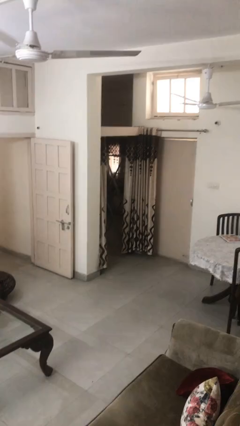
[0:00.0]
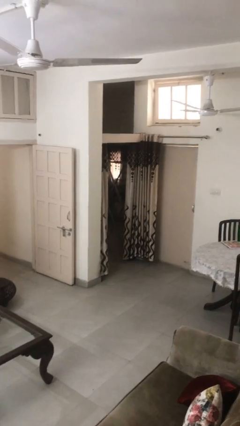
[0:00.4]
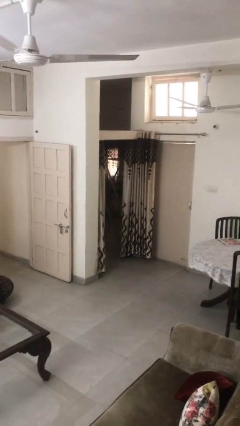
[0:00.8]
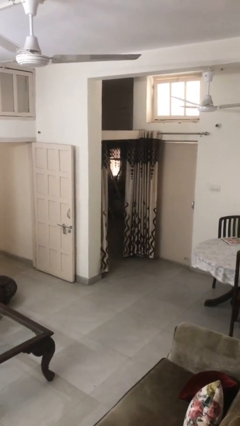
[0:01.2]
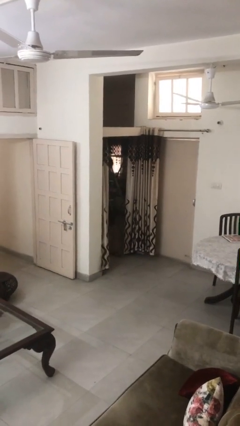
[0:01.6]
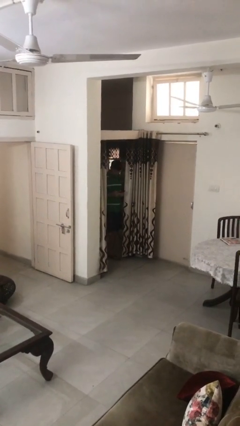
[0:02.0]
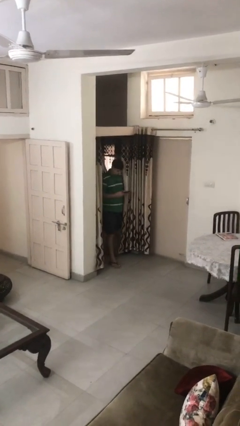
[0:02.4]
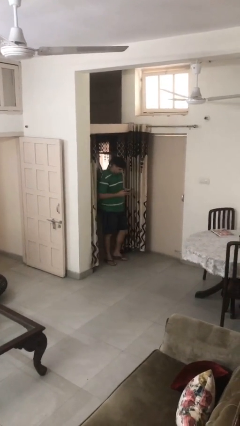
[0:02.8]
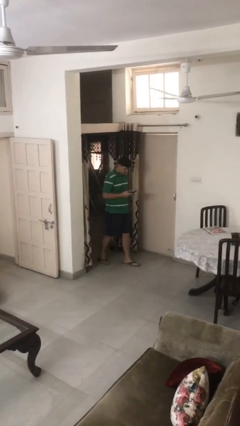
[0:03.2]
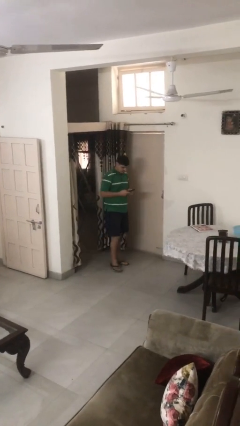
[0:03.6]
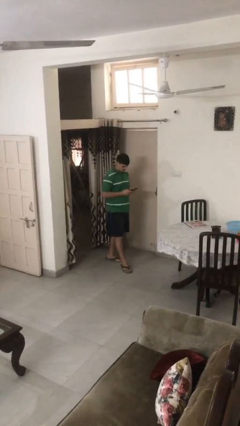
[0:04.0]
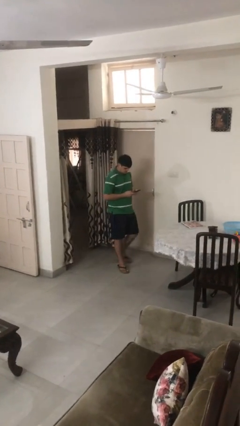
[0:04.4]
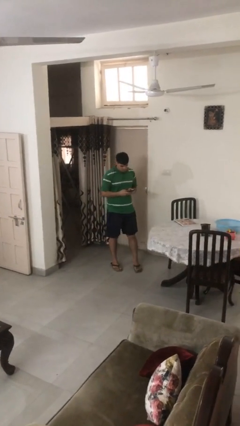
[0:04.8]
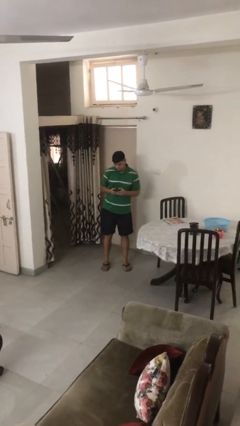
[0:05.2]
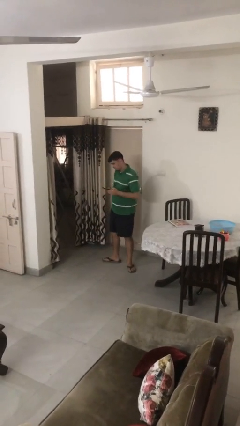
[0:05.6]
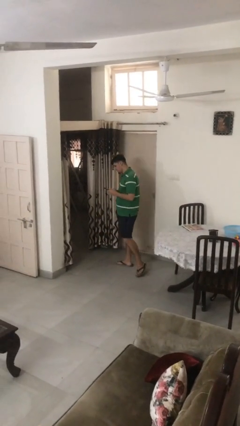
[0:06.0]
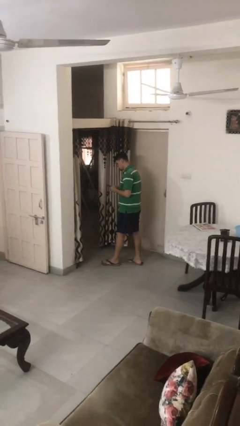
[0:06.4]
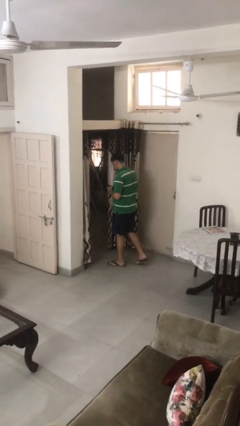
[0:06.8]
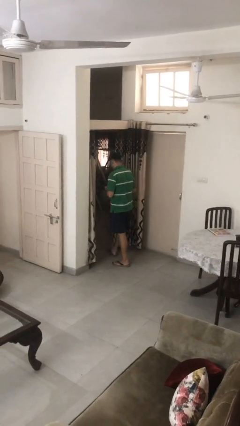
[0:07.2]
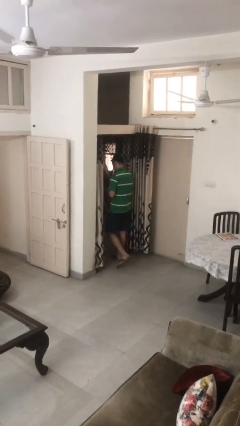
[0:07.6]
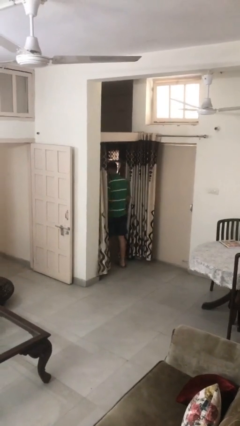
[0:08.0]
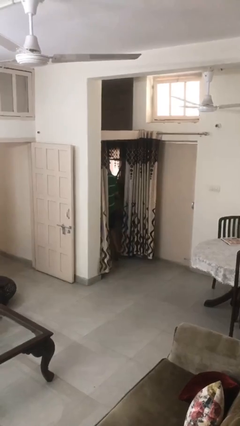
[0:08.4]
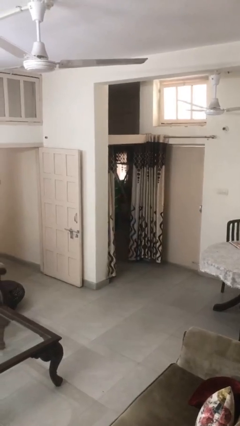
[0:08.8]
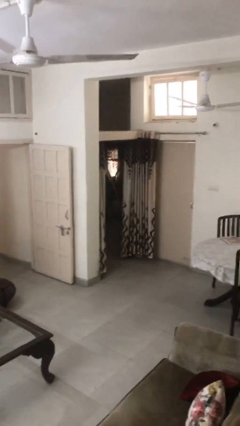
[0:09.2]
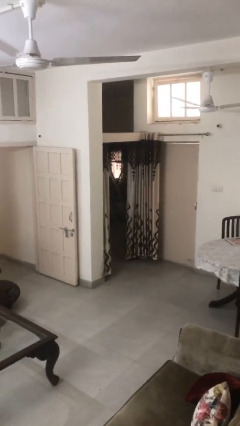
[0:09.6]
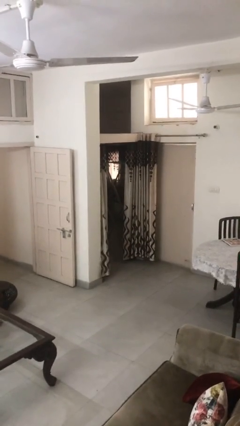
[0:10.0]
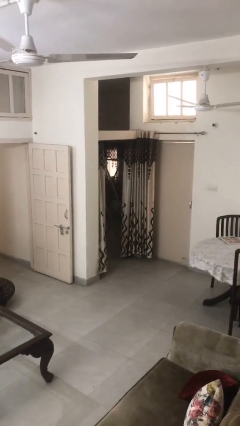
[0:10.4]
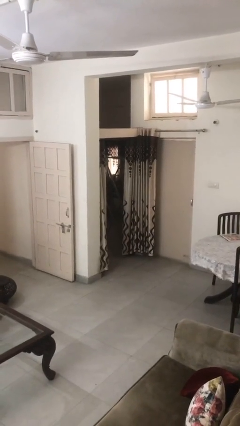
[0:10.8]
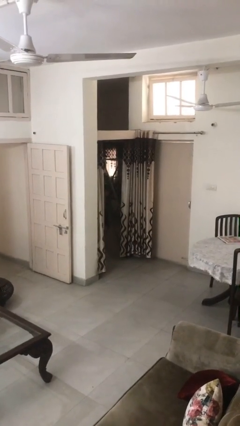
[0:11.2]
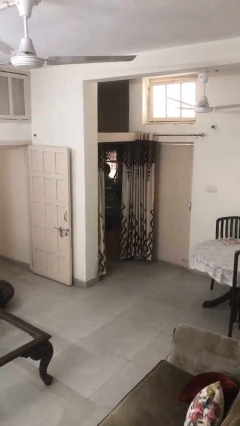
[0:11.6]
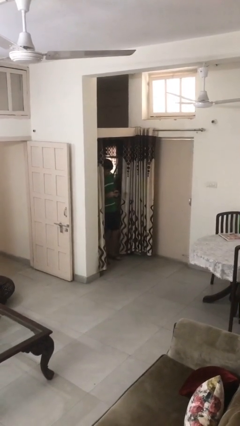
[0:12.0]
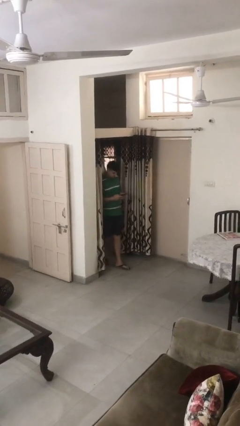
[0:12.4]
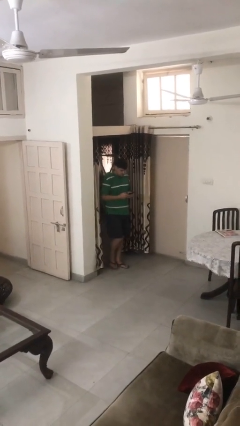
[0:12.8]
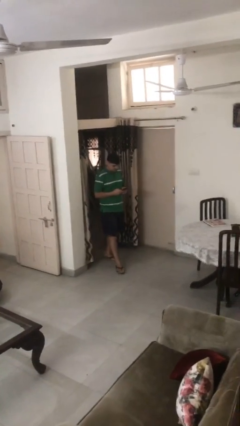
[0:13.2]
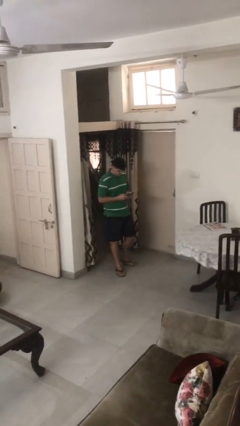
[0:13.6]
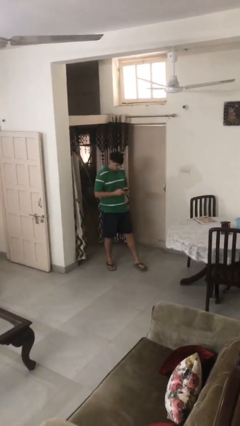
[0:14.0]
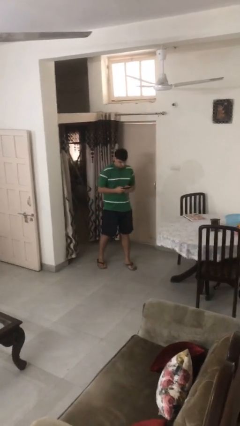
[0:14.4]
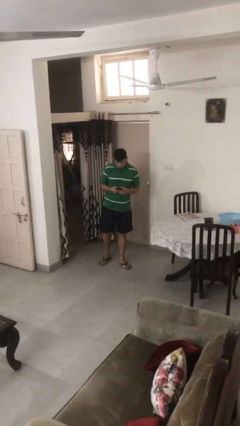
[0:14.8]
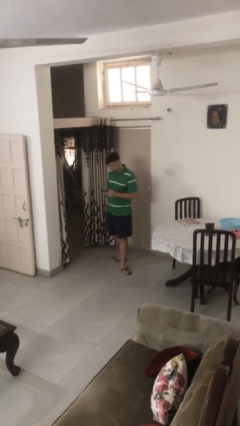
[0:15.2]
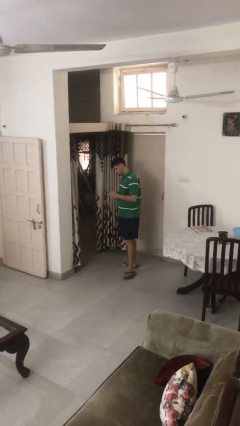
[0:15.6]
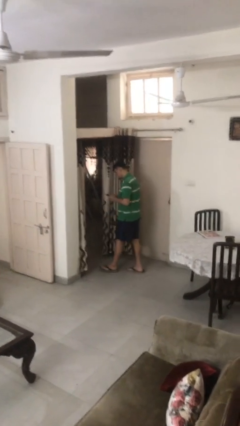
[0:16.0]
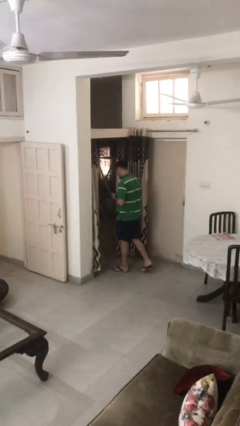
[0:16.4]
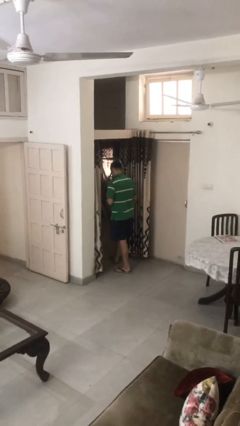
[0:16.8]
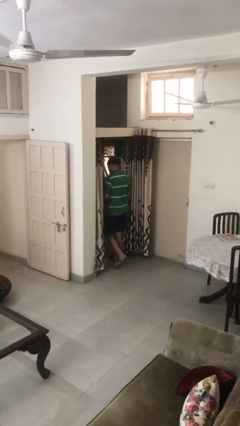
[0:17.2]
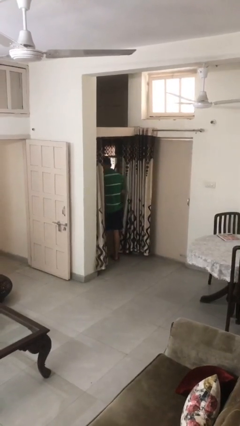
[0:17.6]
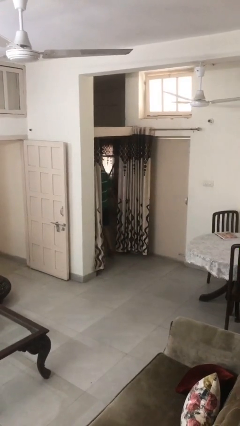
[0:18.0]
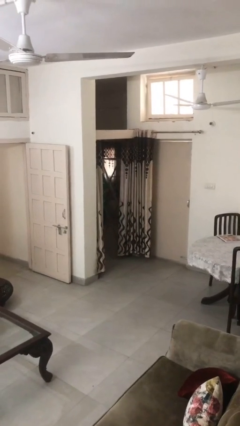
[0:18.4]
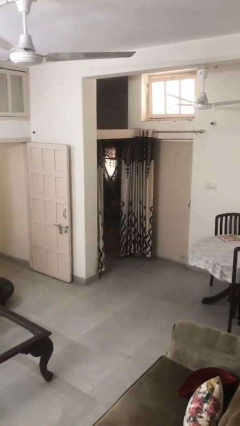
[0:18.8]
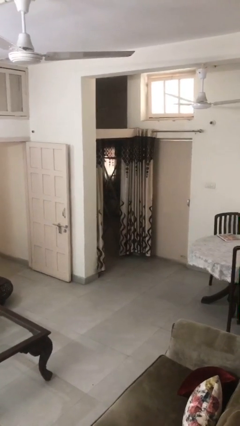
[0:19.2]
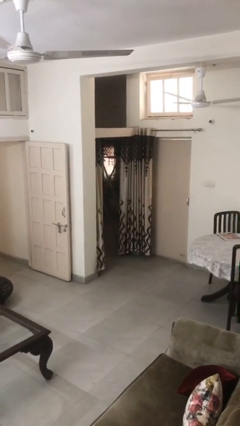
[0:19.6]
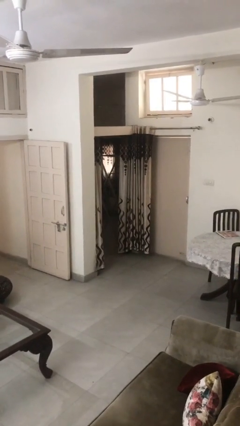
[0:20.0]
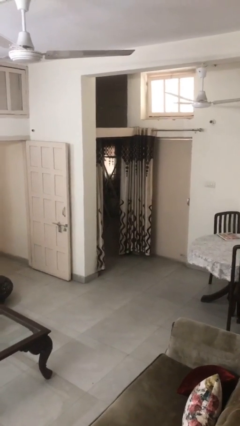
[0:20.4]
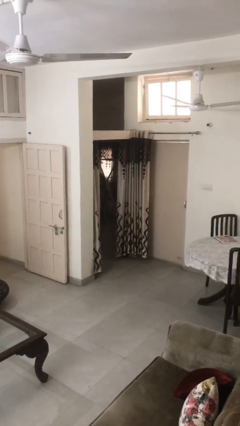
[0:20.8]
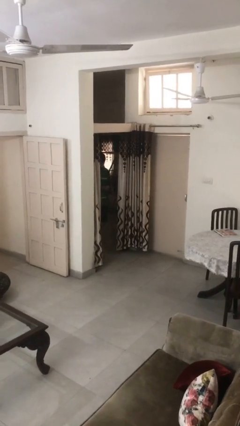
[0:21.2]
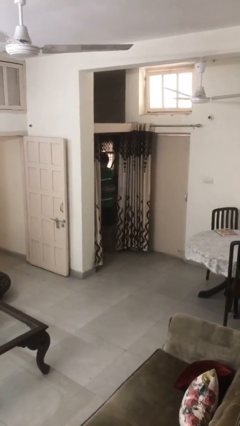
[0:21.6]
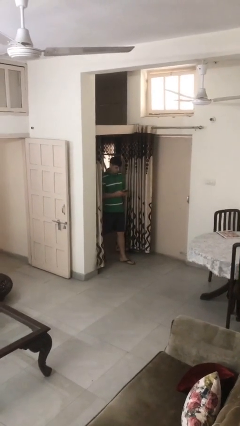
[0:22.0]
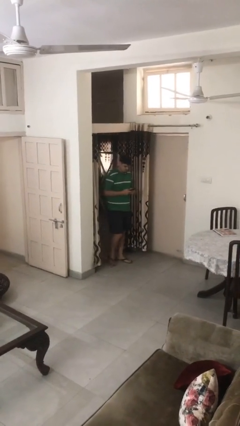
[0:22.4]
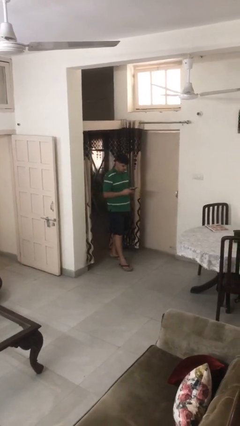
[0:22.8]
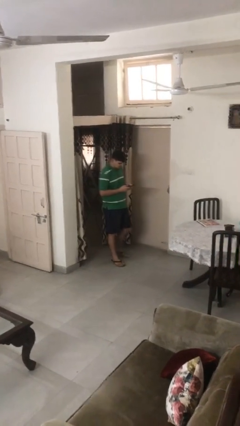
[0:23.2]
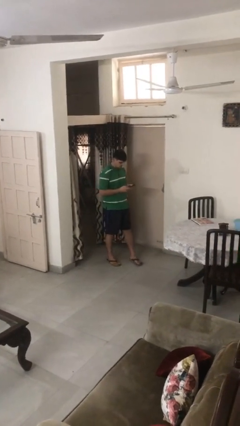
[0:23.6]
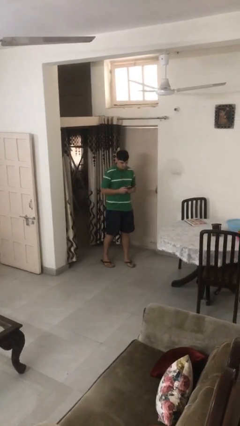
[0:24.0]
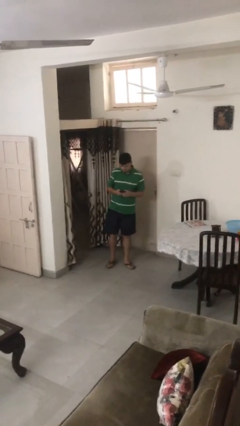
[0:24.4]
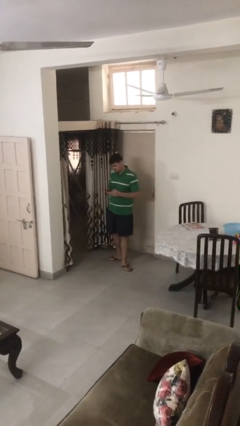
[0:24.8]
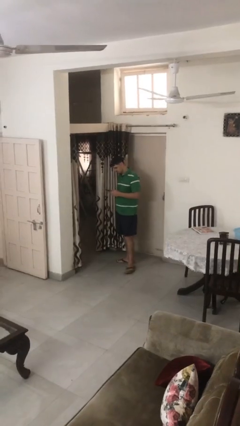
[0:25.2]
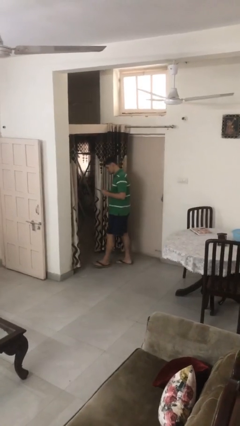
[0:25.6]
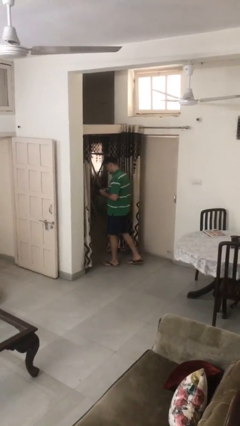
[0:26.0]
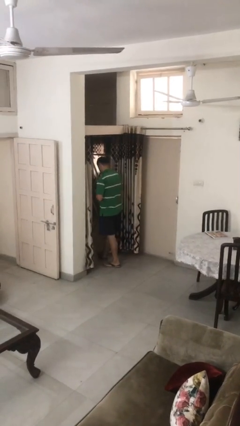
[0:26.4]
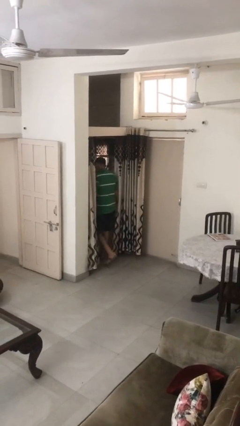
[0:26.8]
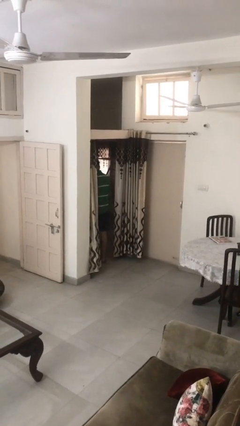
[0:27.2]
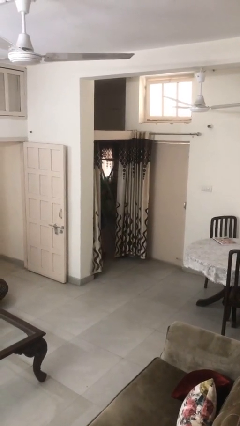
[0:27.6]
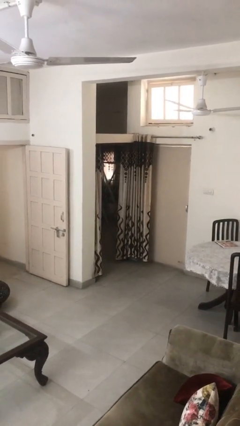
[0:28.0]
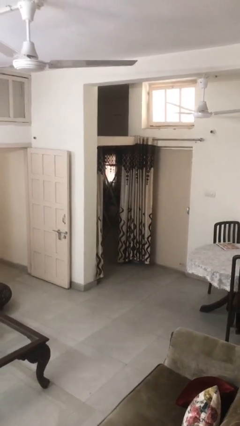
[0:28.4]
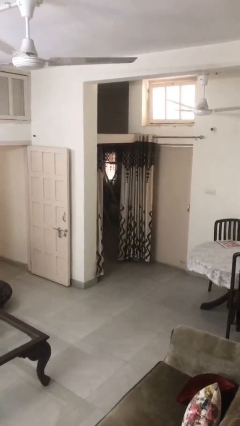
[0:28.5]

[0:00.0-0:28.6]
person texts on phone

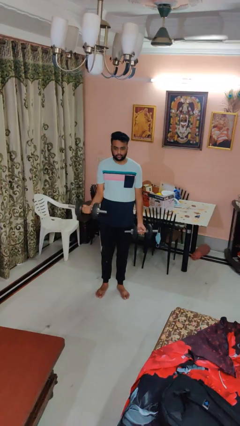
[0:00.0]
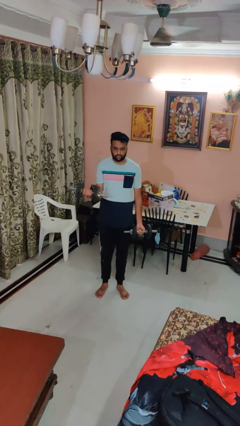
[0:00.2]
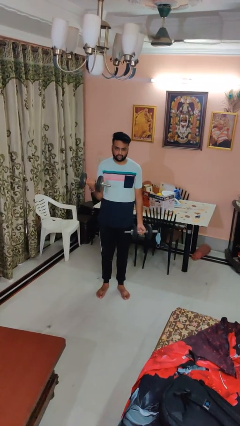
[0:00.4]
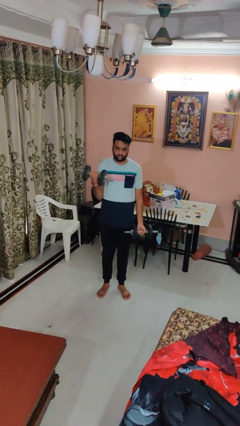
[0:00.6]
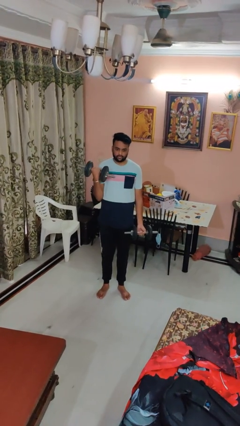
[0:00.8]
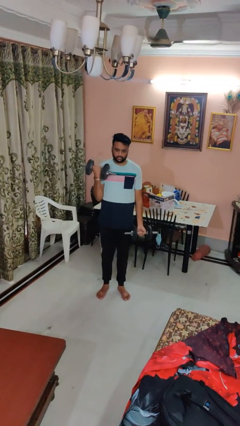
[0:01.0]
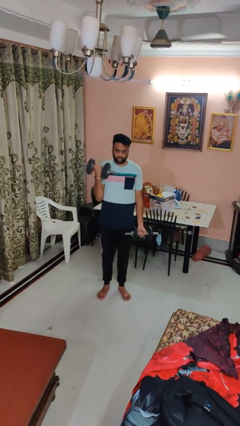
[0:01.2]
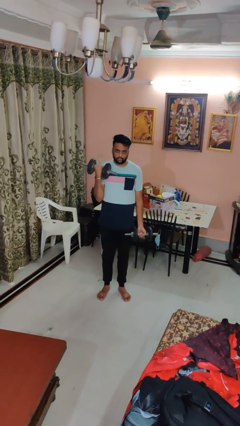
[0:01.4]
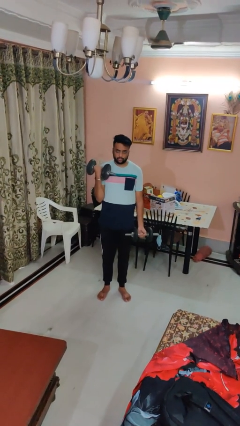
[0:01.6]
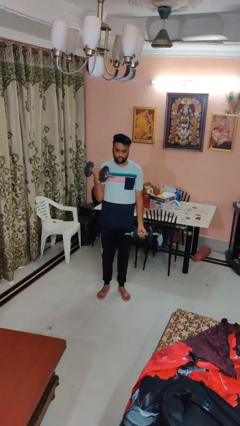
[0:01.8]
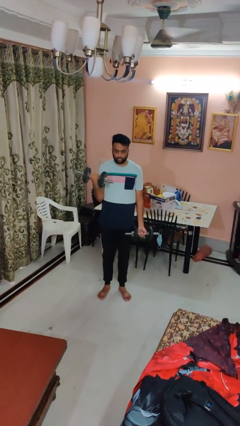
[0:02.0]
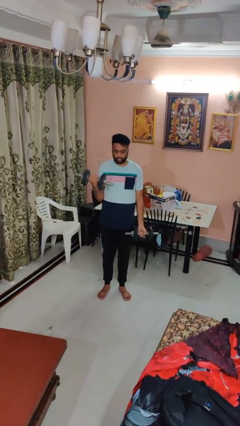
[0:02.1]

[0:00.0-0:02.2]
person lifts dumbbells

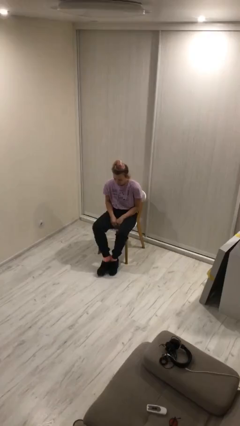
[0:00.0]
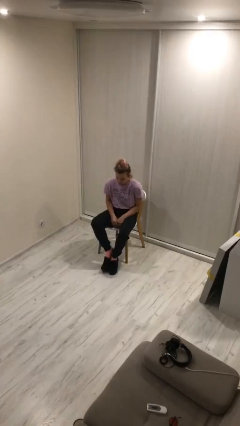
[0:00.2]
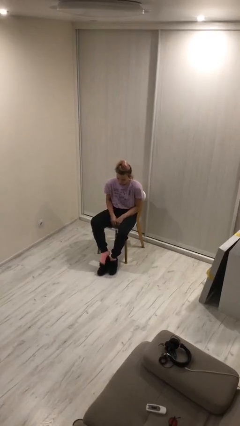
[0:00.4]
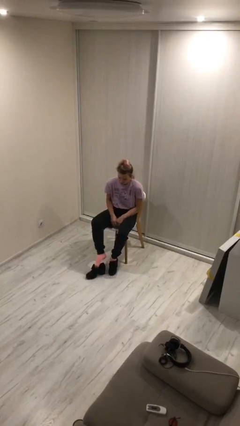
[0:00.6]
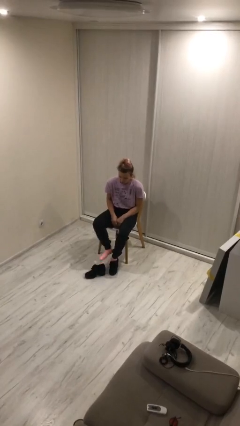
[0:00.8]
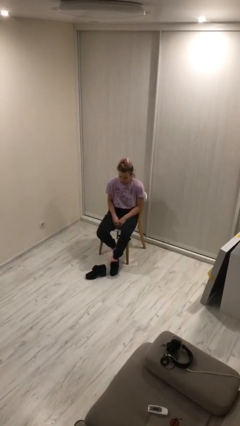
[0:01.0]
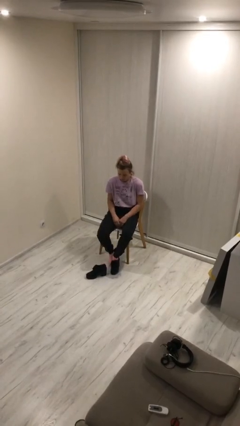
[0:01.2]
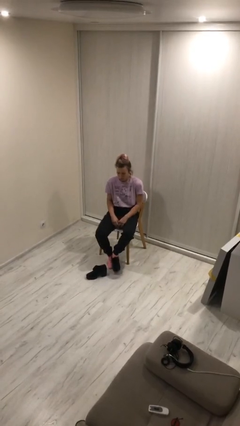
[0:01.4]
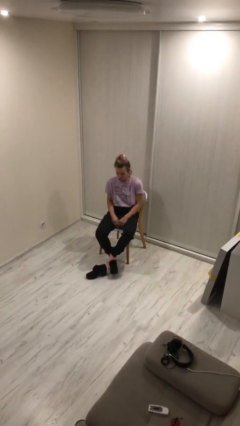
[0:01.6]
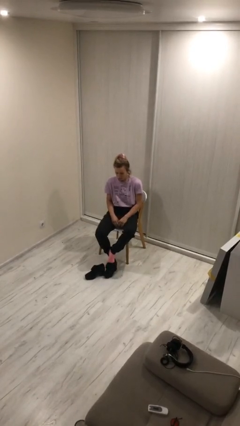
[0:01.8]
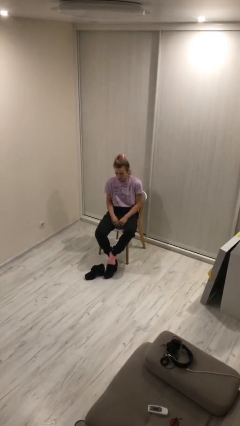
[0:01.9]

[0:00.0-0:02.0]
person takes off shoes
